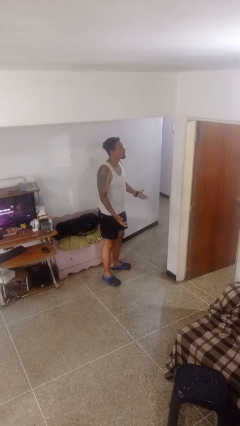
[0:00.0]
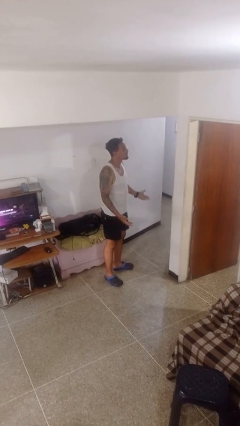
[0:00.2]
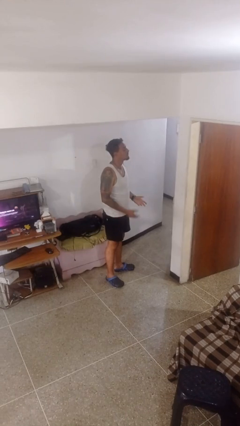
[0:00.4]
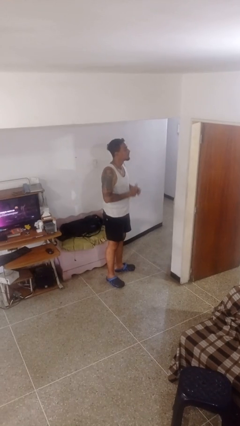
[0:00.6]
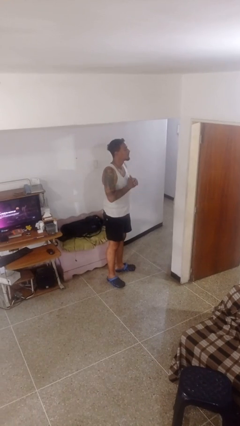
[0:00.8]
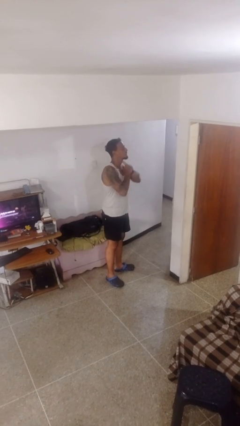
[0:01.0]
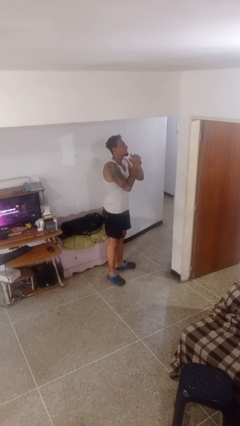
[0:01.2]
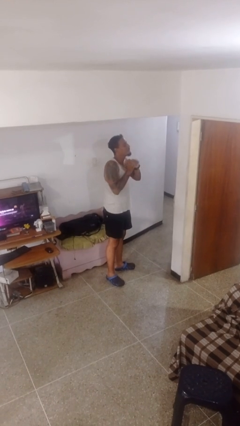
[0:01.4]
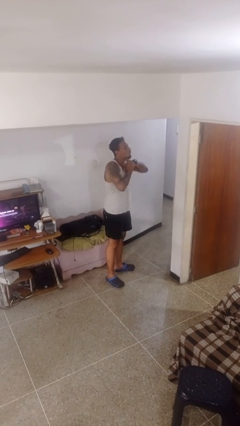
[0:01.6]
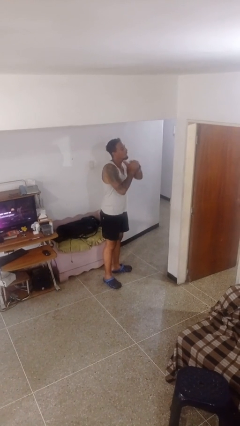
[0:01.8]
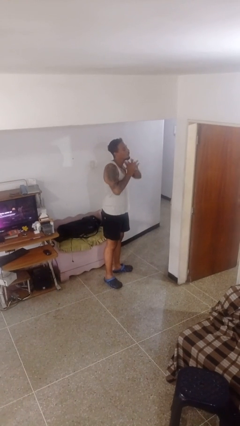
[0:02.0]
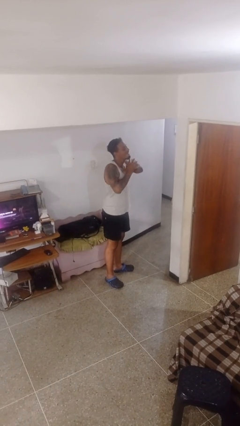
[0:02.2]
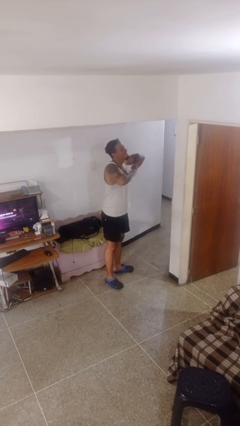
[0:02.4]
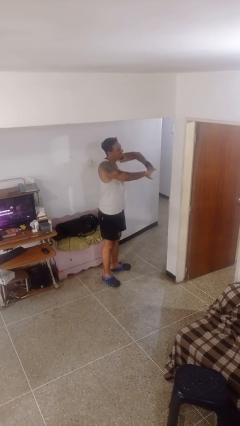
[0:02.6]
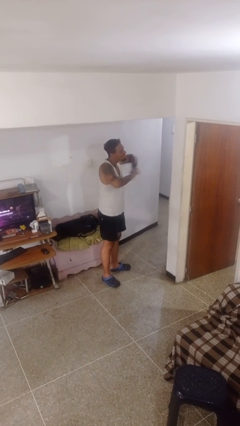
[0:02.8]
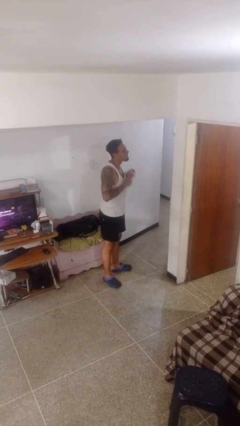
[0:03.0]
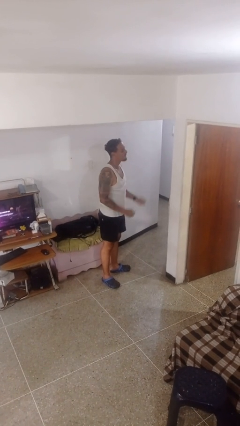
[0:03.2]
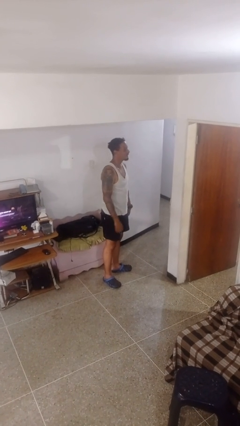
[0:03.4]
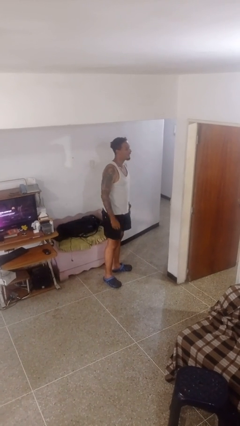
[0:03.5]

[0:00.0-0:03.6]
person cracks knuckles

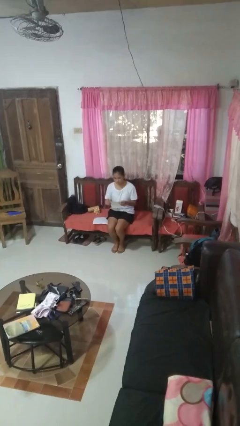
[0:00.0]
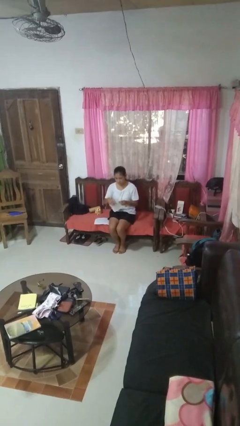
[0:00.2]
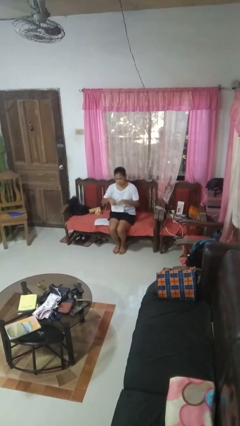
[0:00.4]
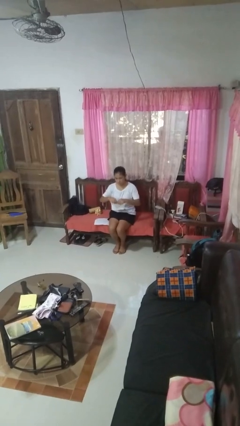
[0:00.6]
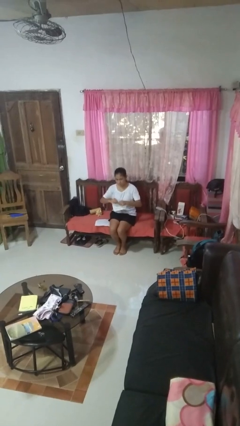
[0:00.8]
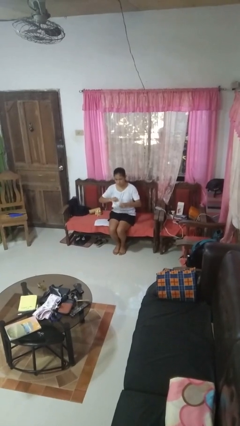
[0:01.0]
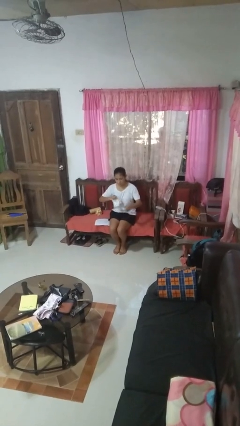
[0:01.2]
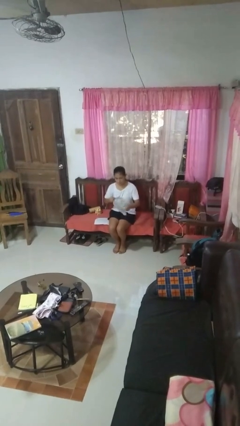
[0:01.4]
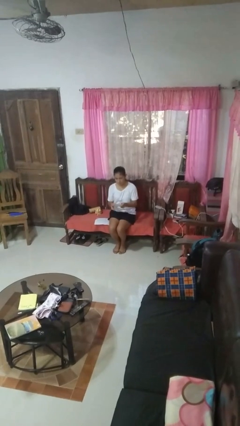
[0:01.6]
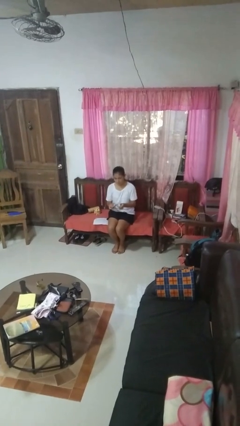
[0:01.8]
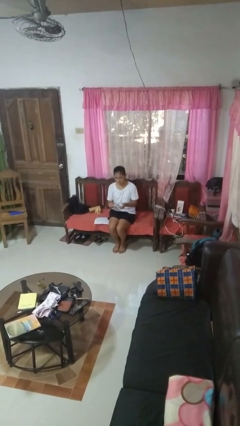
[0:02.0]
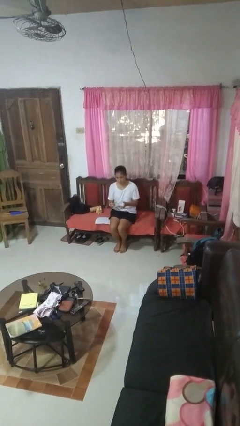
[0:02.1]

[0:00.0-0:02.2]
person tears paper

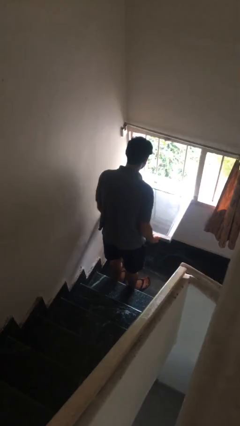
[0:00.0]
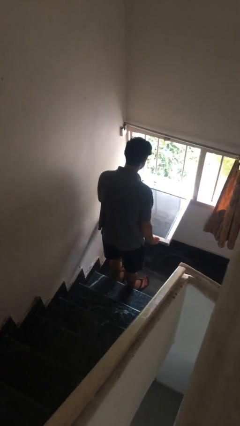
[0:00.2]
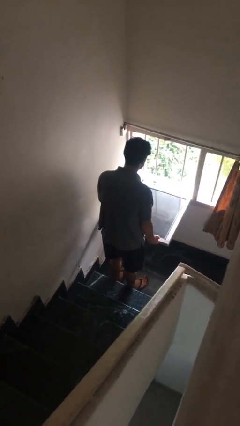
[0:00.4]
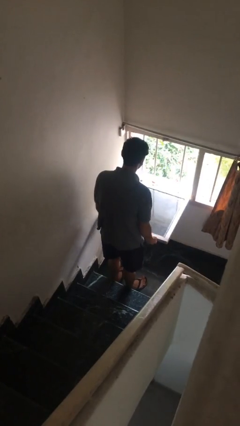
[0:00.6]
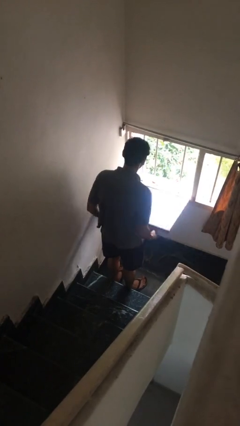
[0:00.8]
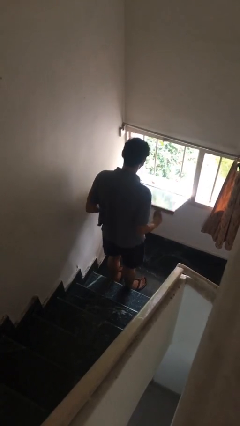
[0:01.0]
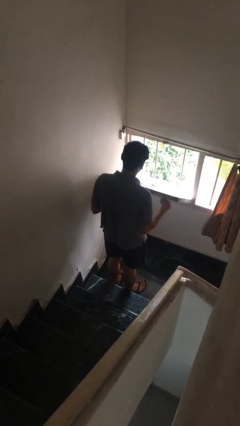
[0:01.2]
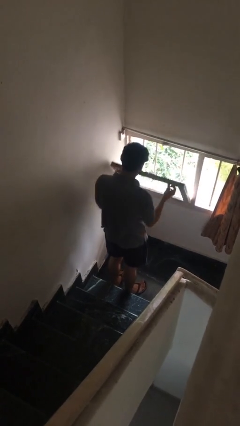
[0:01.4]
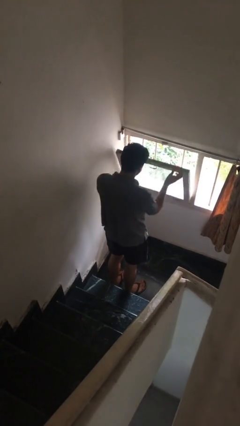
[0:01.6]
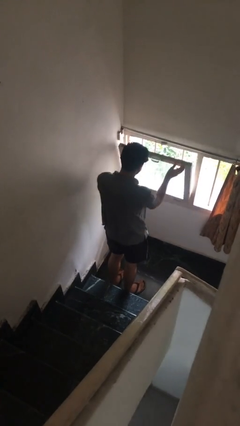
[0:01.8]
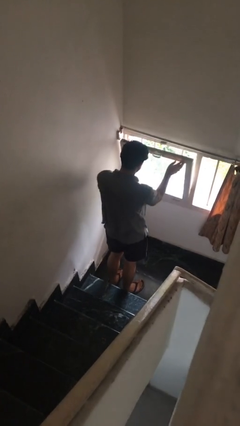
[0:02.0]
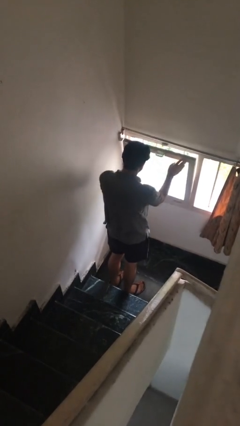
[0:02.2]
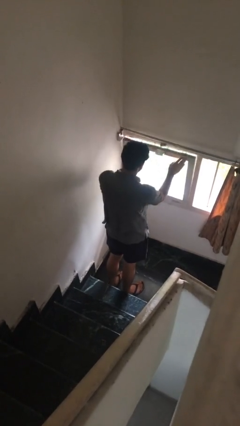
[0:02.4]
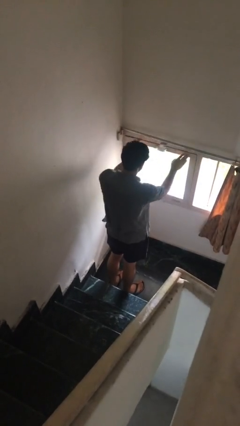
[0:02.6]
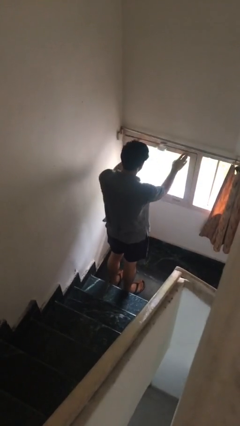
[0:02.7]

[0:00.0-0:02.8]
person closes home window

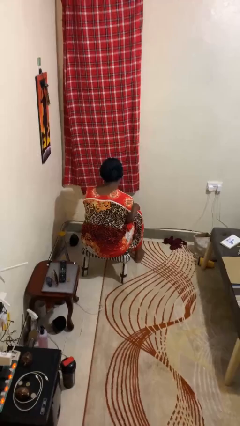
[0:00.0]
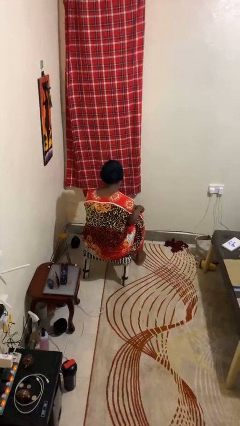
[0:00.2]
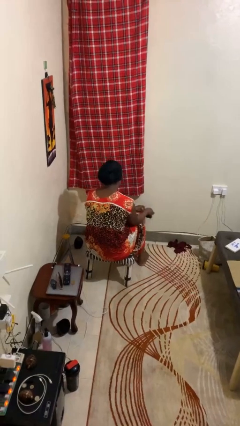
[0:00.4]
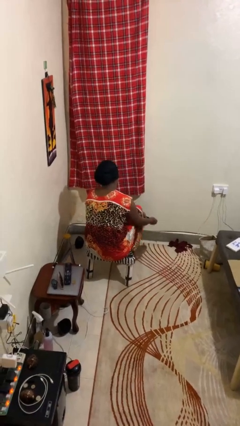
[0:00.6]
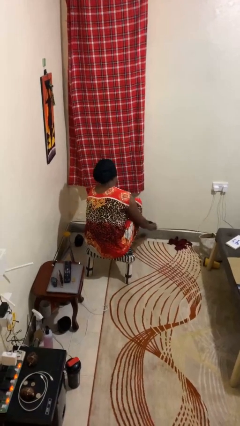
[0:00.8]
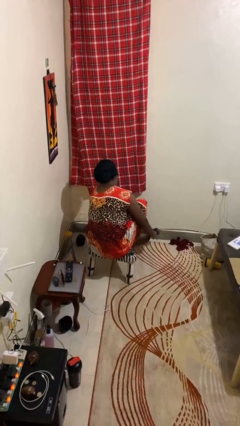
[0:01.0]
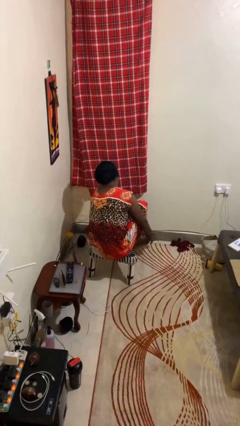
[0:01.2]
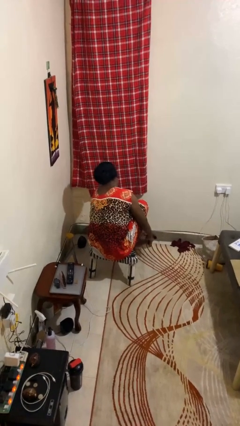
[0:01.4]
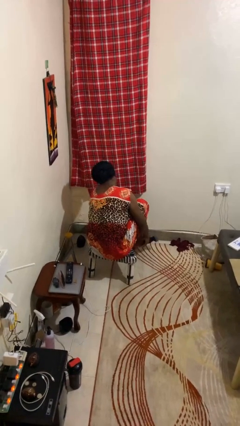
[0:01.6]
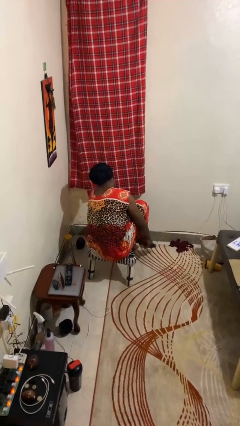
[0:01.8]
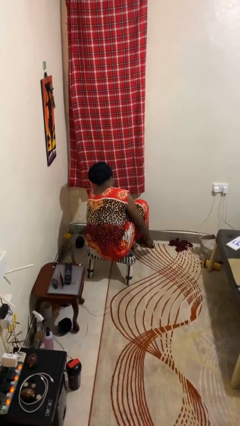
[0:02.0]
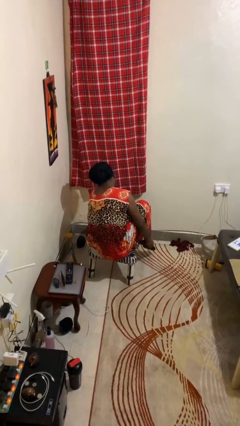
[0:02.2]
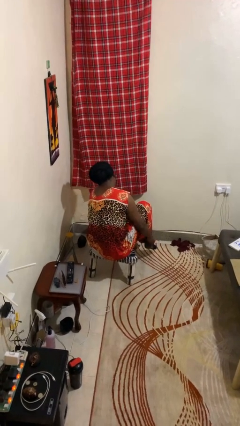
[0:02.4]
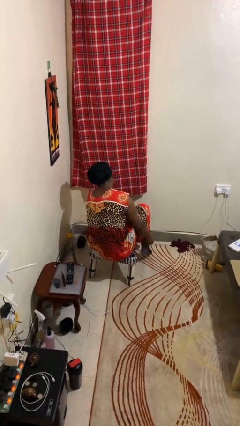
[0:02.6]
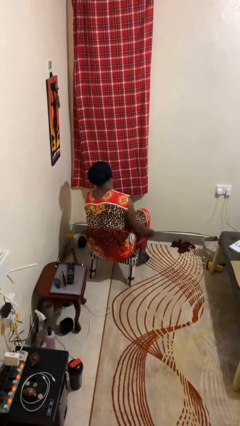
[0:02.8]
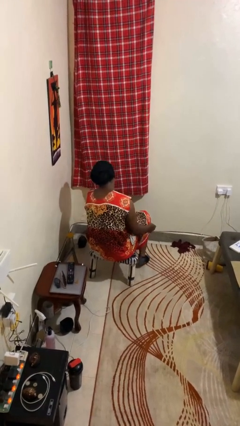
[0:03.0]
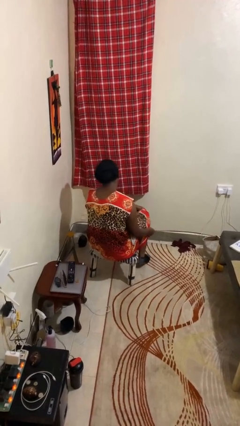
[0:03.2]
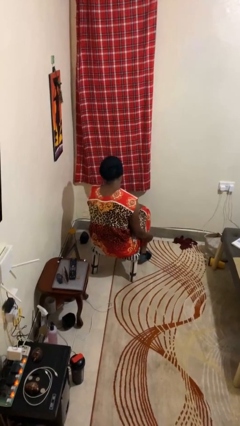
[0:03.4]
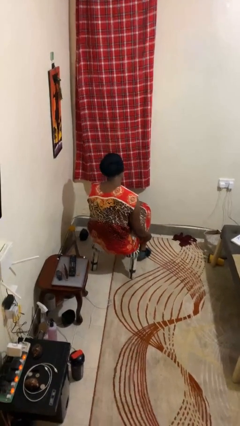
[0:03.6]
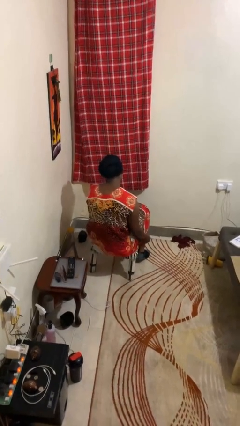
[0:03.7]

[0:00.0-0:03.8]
person puts on socks

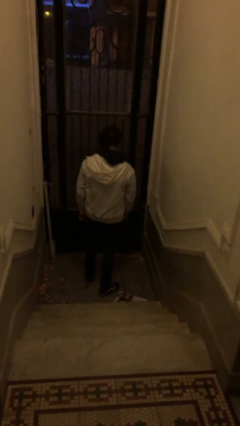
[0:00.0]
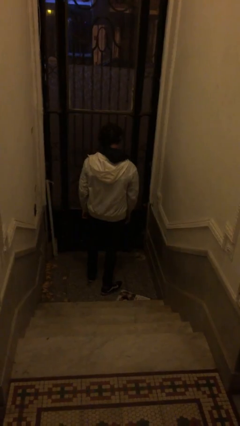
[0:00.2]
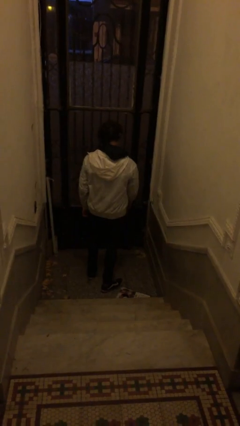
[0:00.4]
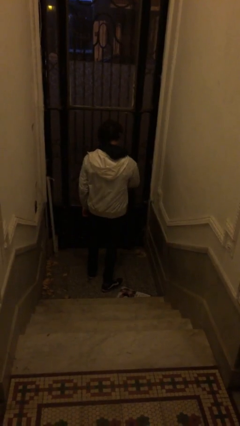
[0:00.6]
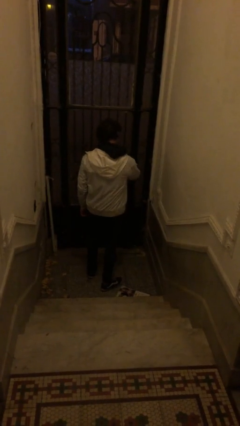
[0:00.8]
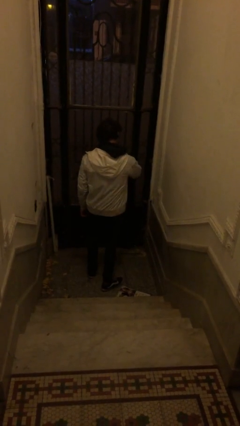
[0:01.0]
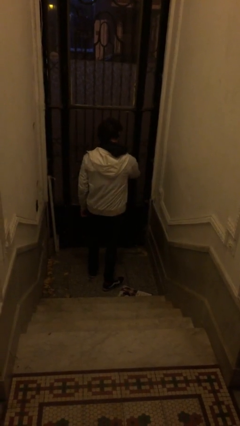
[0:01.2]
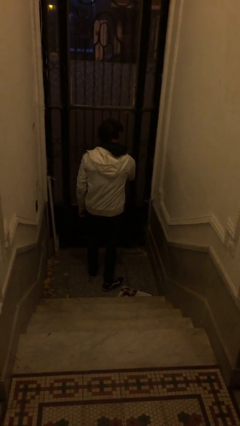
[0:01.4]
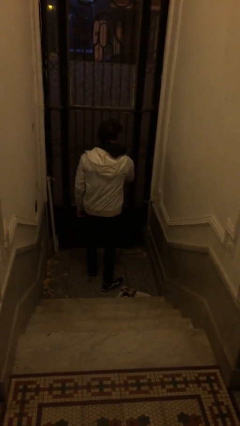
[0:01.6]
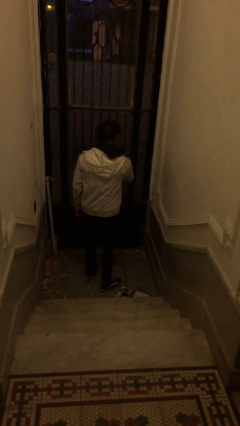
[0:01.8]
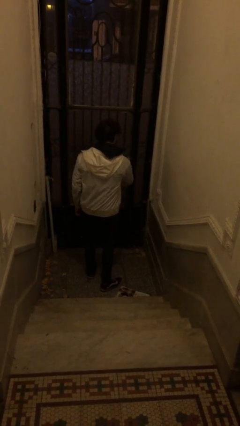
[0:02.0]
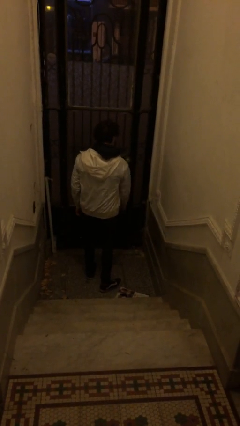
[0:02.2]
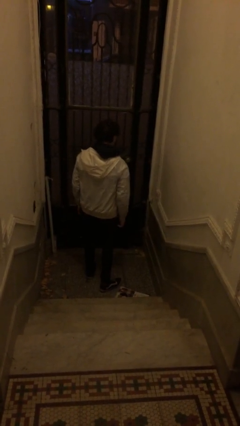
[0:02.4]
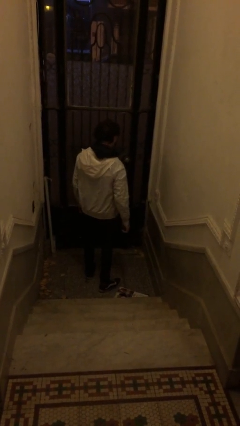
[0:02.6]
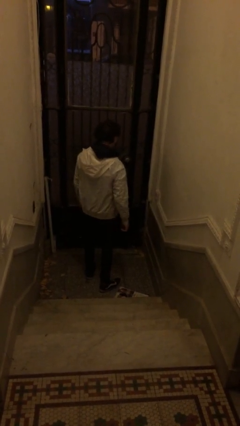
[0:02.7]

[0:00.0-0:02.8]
person locks door with keys

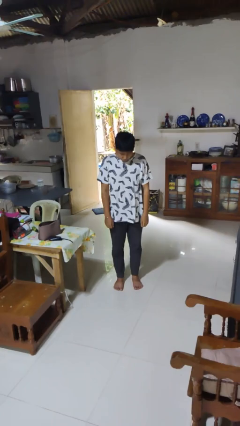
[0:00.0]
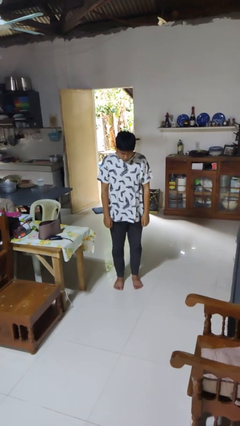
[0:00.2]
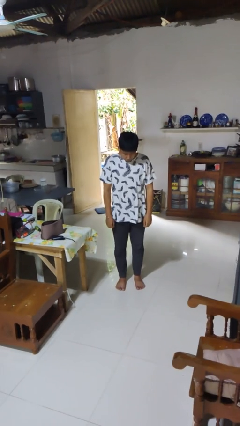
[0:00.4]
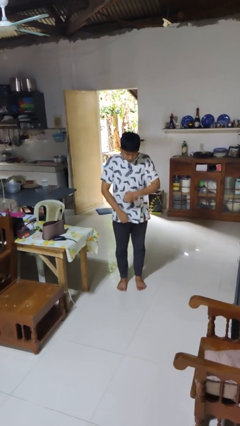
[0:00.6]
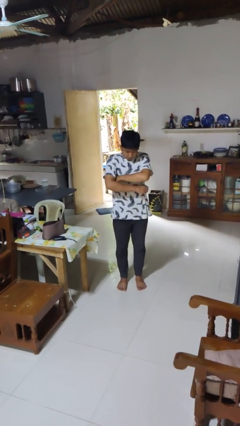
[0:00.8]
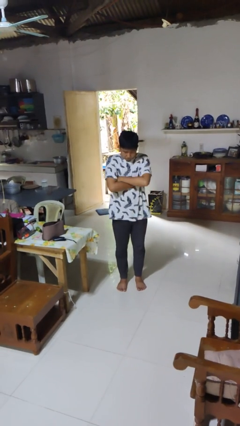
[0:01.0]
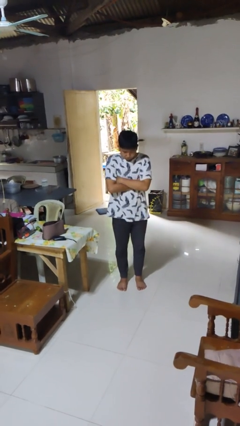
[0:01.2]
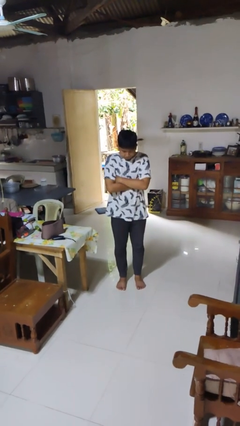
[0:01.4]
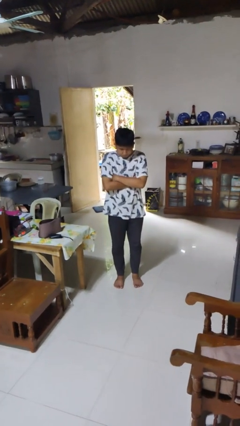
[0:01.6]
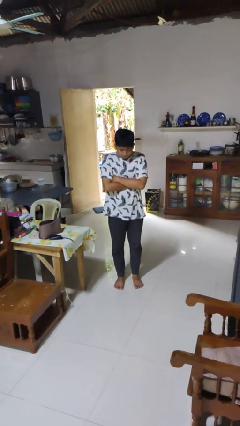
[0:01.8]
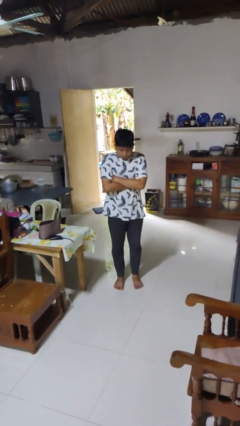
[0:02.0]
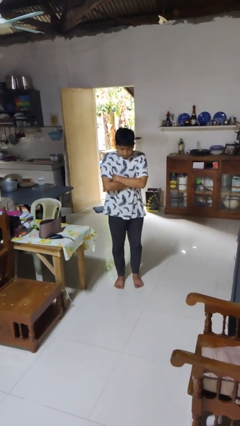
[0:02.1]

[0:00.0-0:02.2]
person gestures arms x
